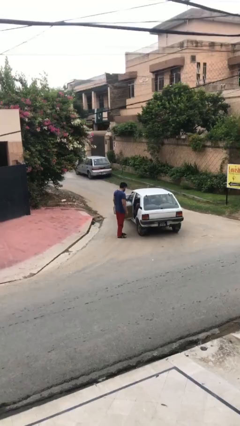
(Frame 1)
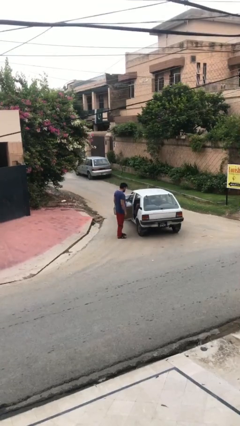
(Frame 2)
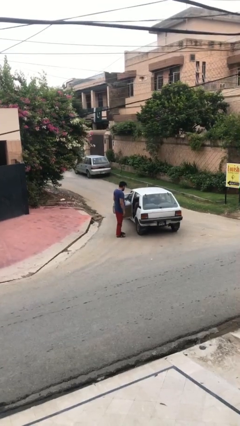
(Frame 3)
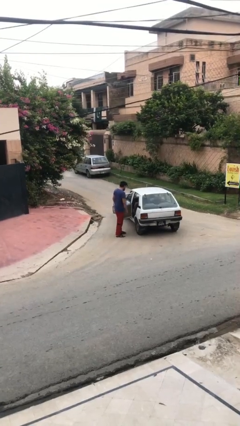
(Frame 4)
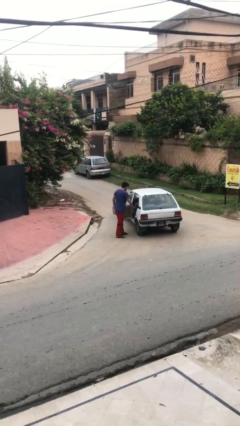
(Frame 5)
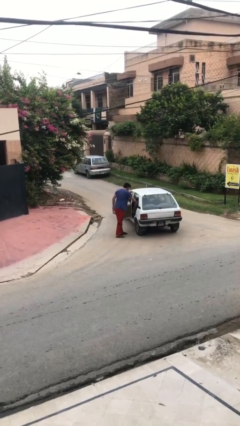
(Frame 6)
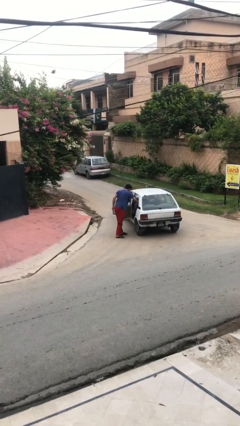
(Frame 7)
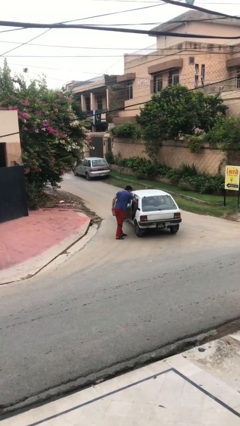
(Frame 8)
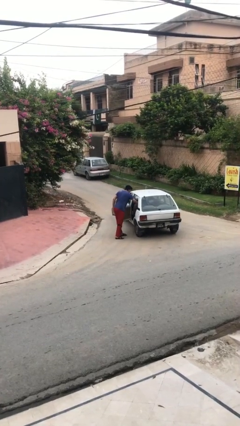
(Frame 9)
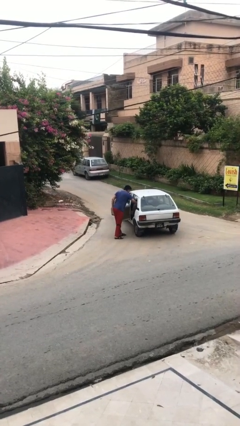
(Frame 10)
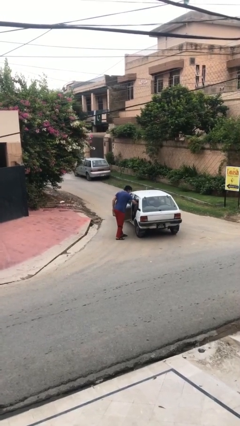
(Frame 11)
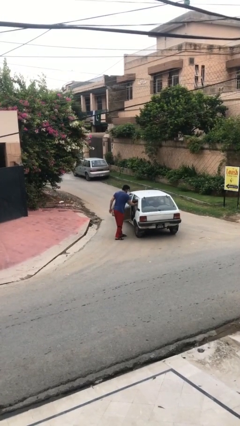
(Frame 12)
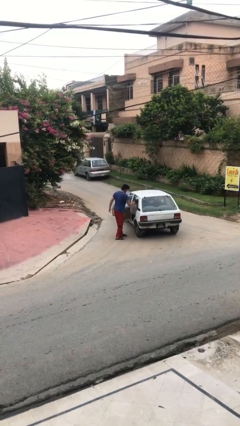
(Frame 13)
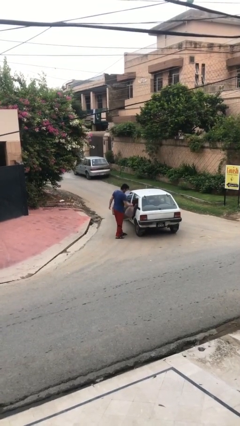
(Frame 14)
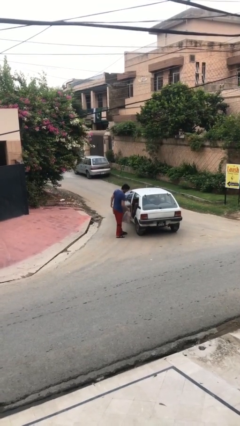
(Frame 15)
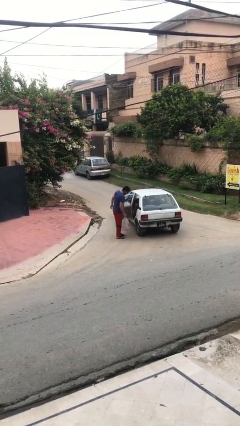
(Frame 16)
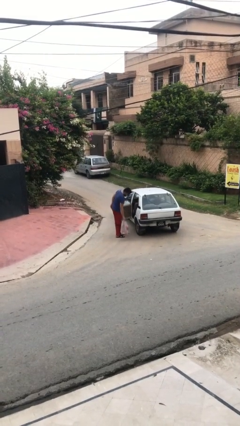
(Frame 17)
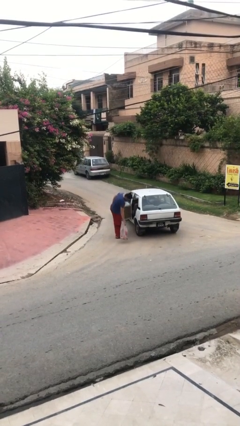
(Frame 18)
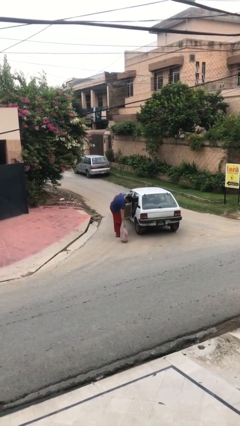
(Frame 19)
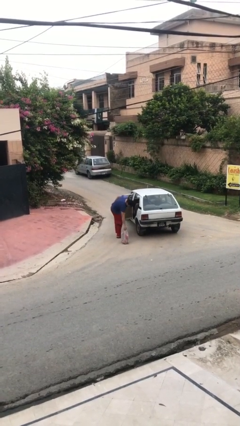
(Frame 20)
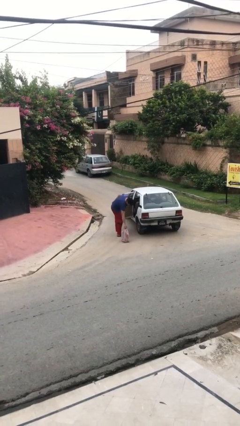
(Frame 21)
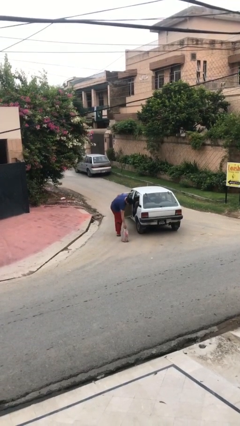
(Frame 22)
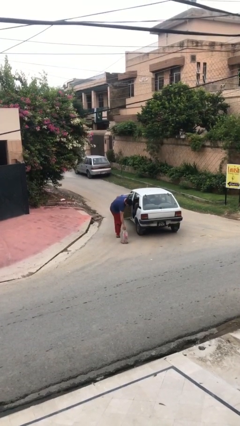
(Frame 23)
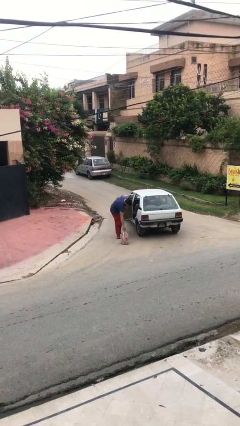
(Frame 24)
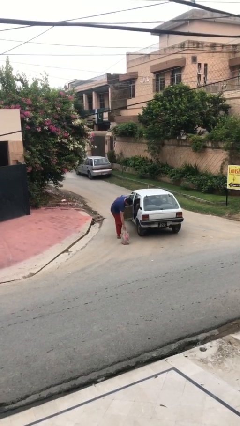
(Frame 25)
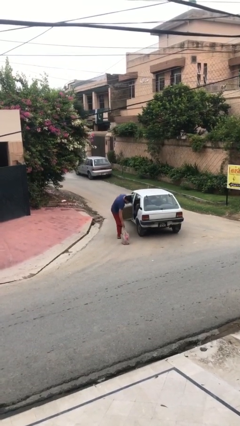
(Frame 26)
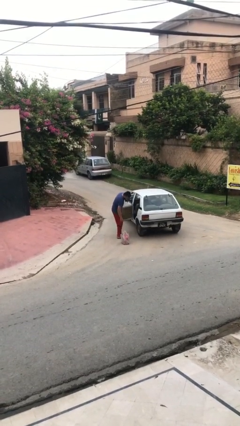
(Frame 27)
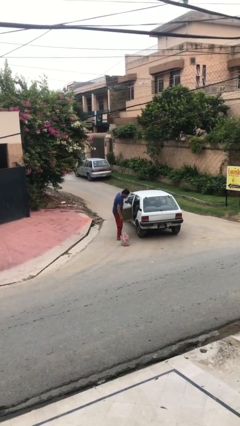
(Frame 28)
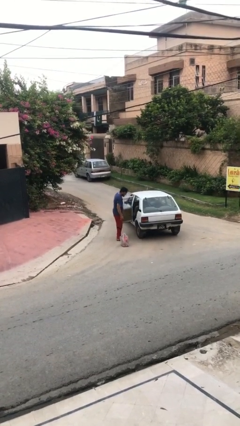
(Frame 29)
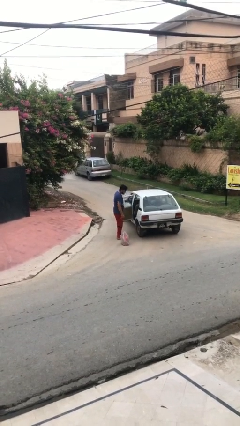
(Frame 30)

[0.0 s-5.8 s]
person unloads car

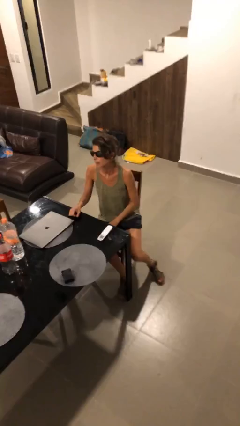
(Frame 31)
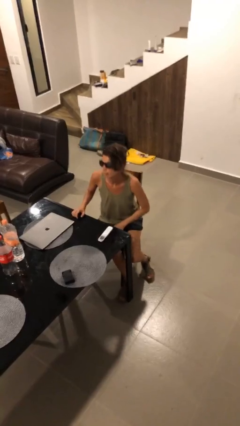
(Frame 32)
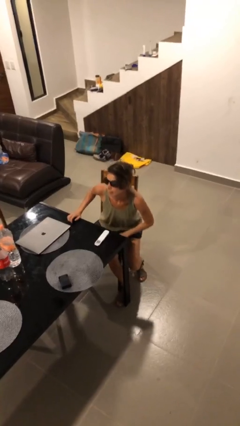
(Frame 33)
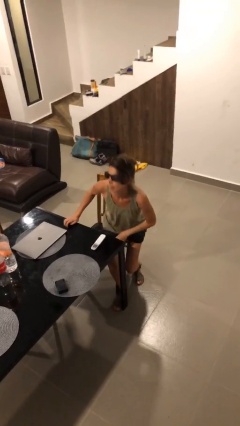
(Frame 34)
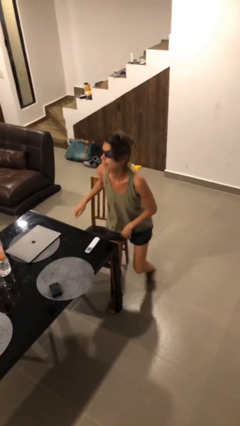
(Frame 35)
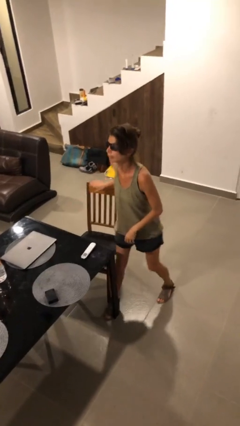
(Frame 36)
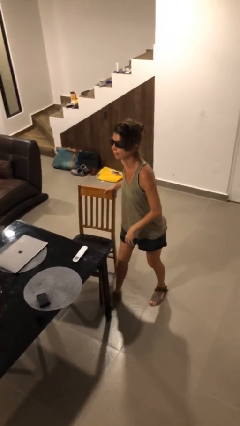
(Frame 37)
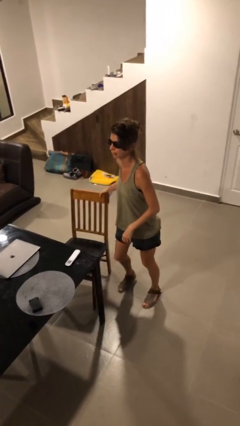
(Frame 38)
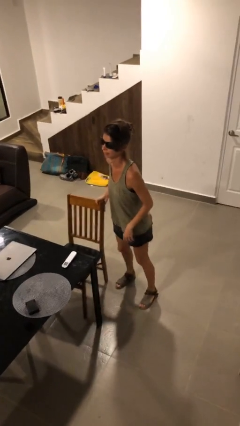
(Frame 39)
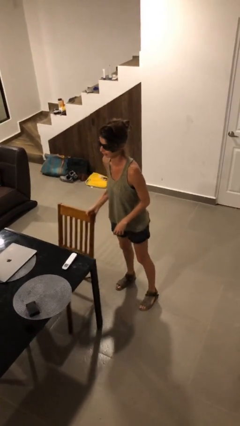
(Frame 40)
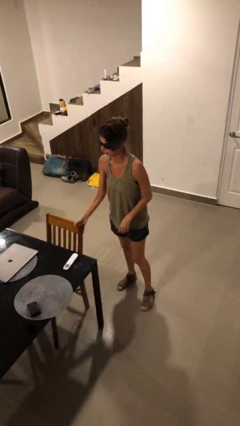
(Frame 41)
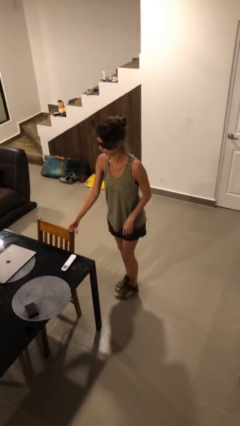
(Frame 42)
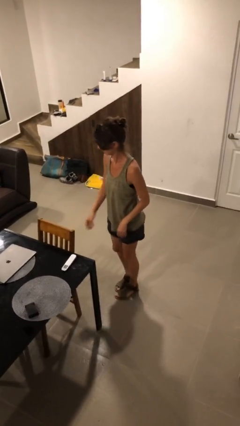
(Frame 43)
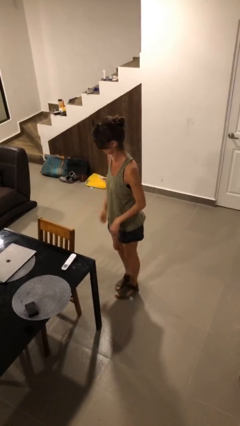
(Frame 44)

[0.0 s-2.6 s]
person stands up

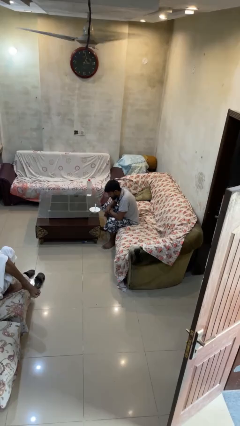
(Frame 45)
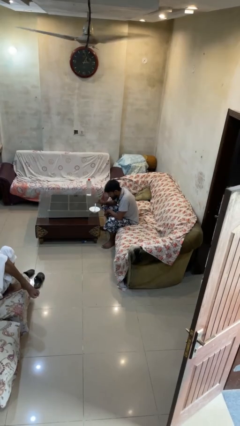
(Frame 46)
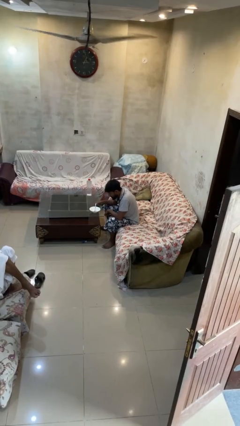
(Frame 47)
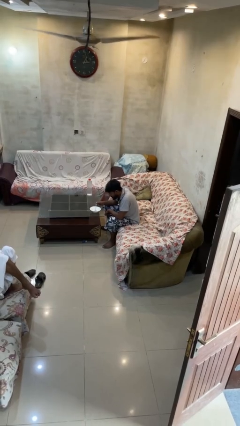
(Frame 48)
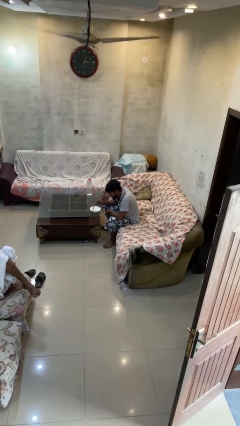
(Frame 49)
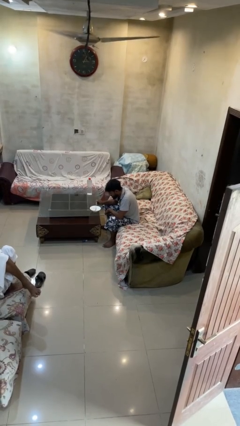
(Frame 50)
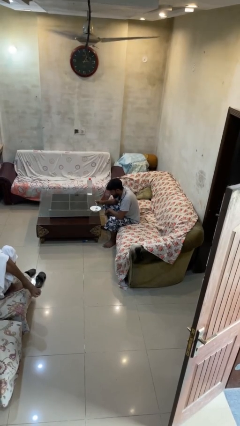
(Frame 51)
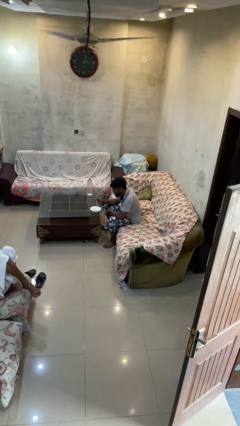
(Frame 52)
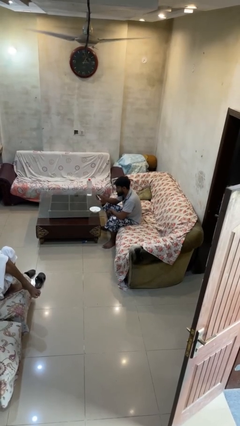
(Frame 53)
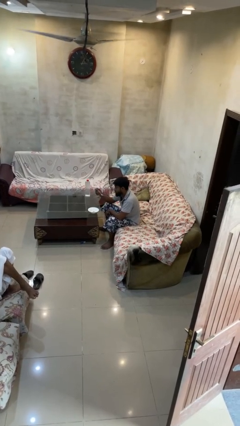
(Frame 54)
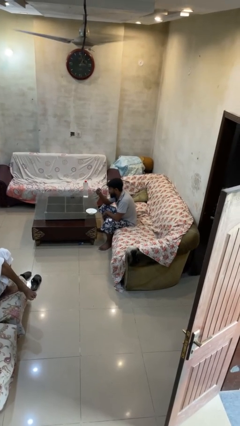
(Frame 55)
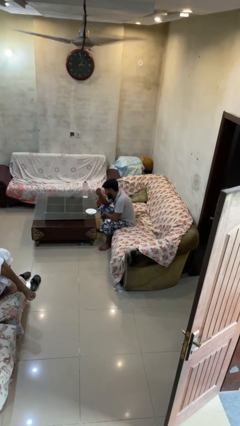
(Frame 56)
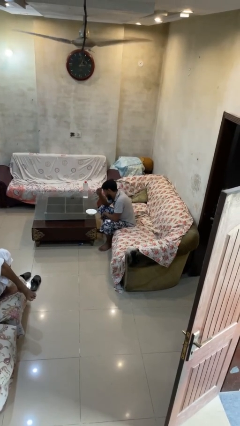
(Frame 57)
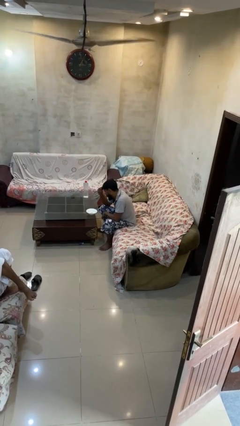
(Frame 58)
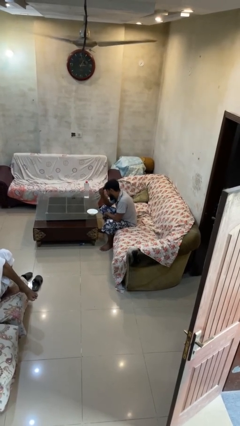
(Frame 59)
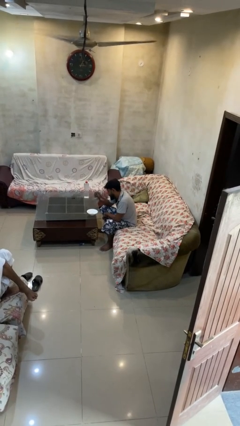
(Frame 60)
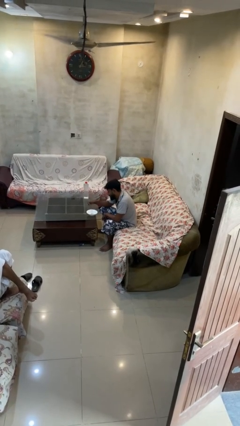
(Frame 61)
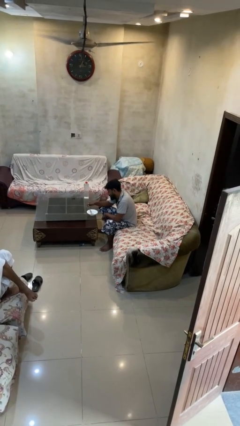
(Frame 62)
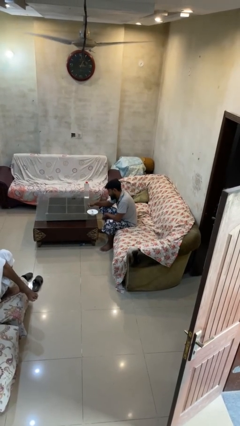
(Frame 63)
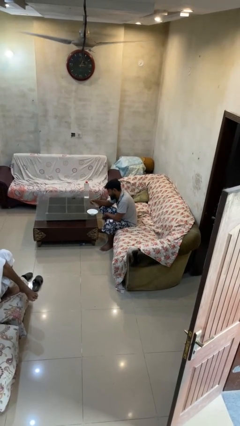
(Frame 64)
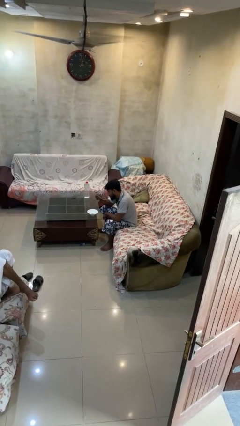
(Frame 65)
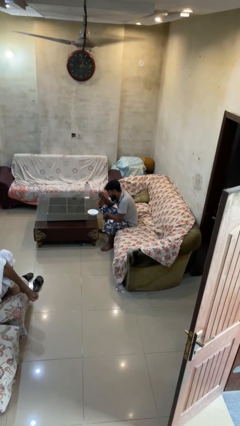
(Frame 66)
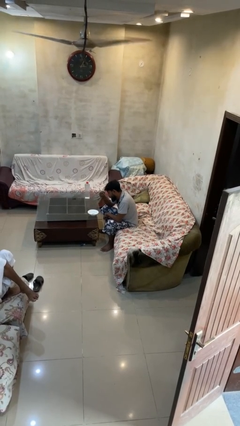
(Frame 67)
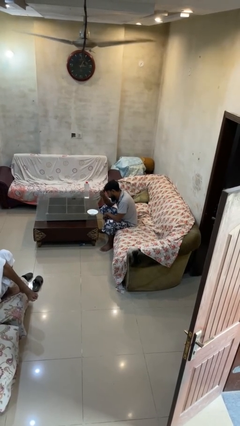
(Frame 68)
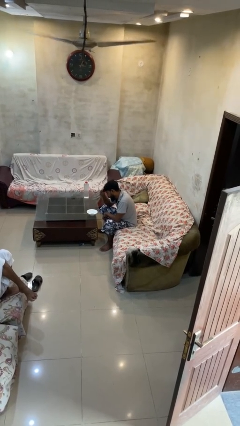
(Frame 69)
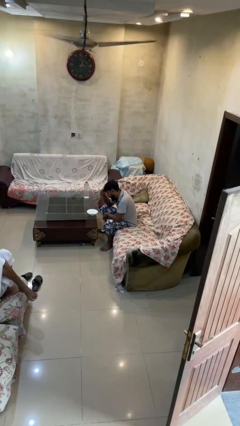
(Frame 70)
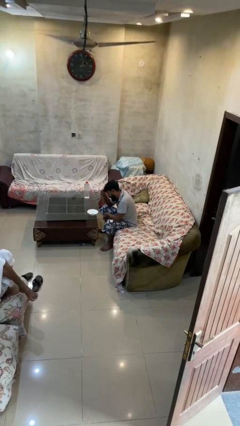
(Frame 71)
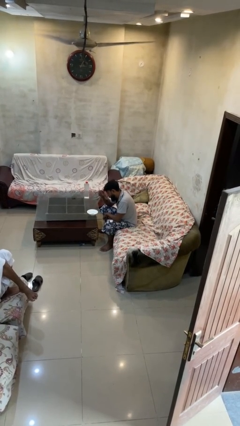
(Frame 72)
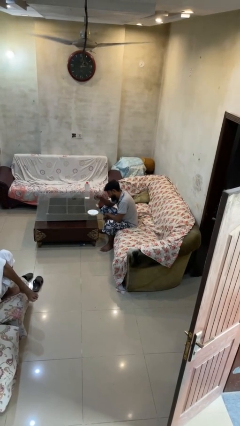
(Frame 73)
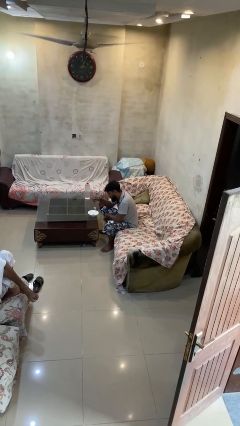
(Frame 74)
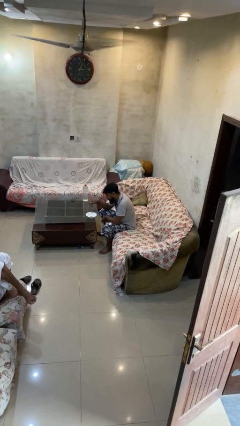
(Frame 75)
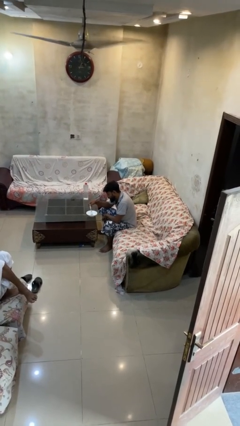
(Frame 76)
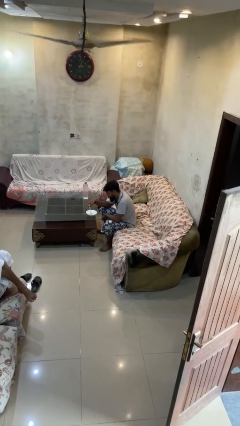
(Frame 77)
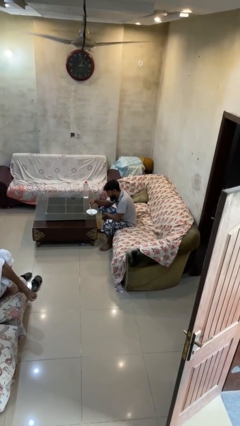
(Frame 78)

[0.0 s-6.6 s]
person eats with utensil

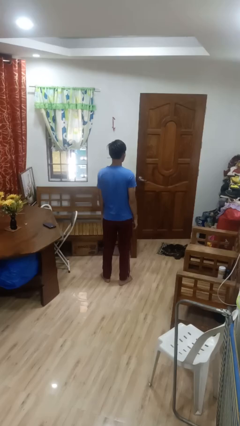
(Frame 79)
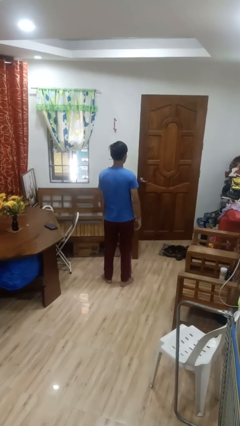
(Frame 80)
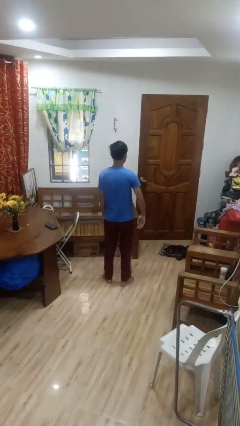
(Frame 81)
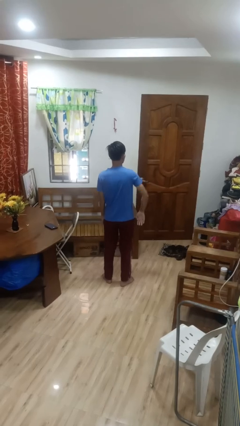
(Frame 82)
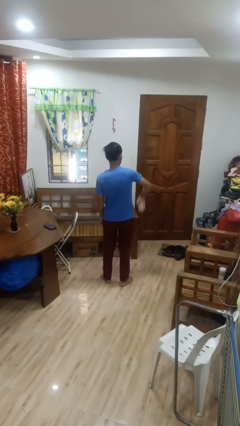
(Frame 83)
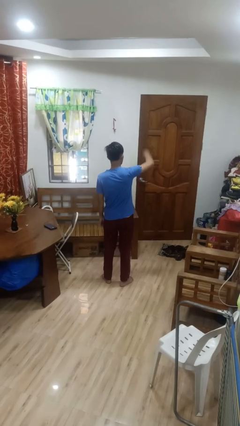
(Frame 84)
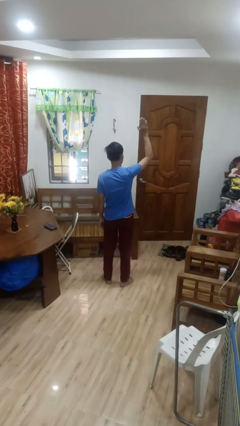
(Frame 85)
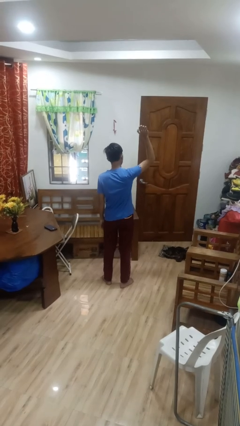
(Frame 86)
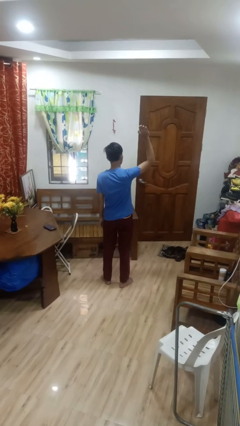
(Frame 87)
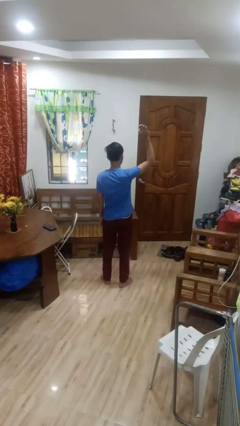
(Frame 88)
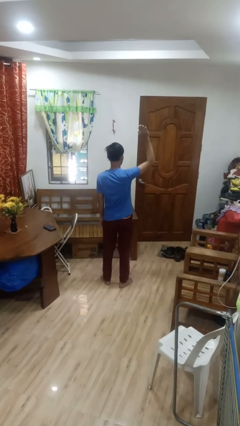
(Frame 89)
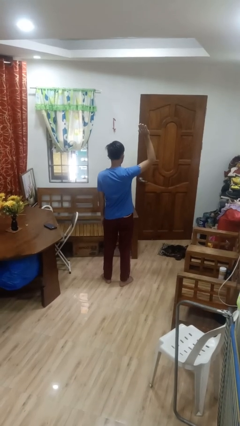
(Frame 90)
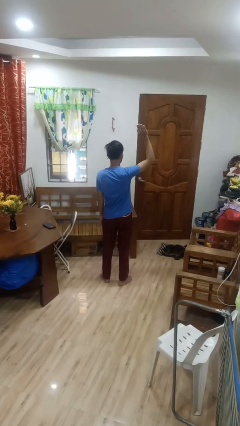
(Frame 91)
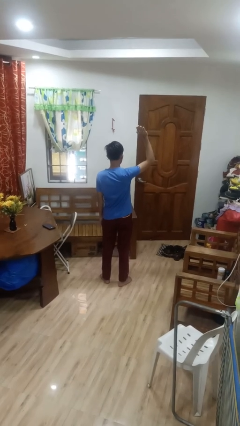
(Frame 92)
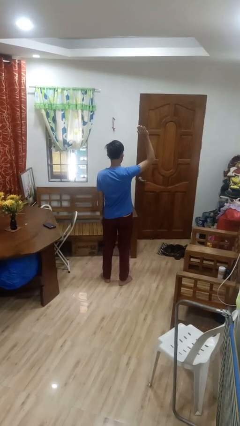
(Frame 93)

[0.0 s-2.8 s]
person gestures swipe up
